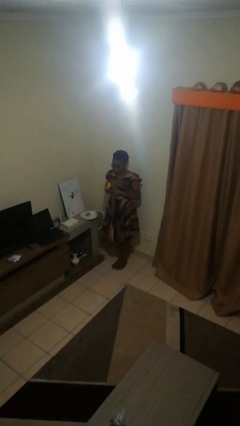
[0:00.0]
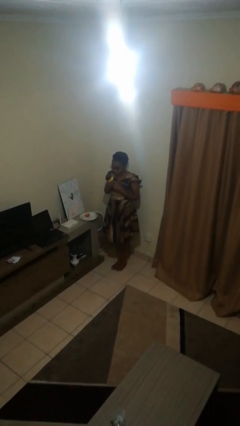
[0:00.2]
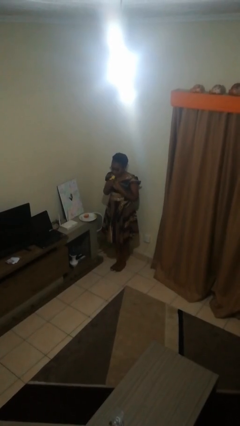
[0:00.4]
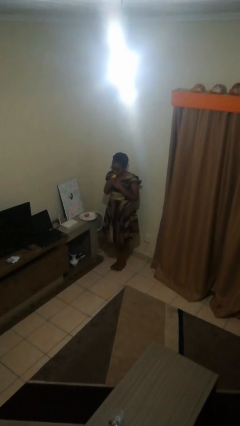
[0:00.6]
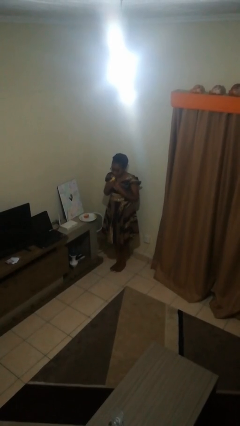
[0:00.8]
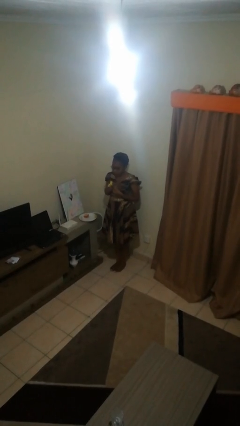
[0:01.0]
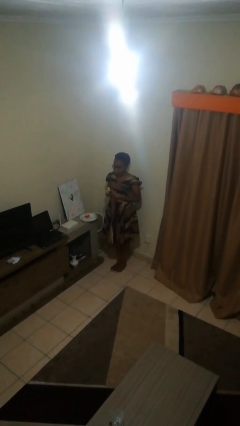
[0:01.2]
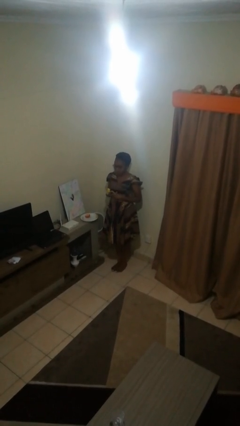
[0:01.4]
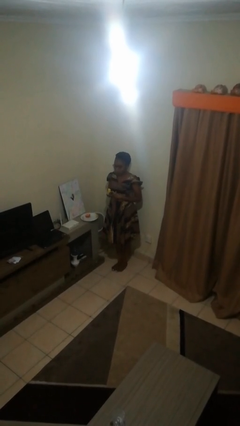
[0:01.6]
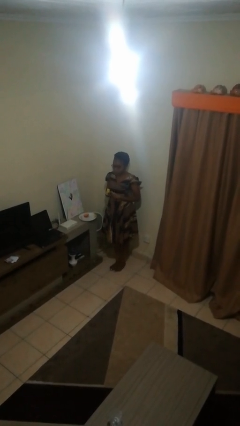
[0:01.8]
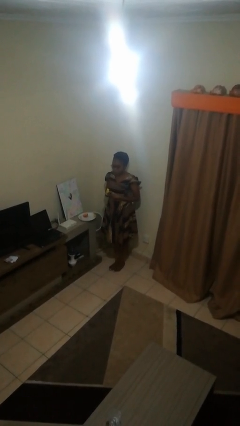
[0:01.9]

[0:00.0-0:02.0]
person eats banana

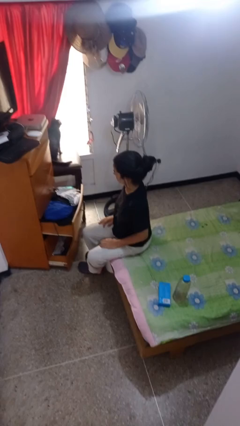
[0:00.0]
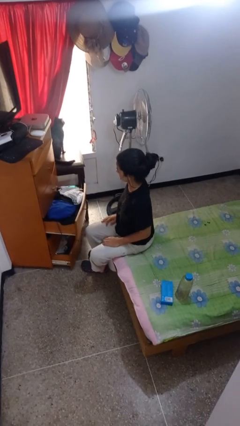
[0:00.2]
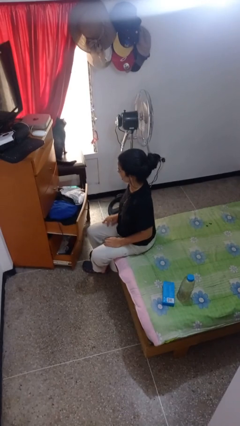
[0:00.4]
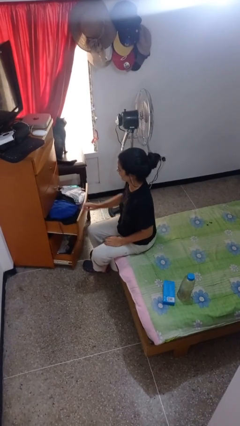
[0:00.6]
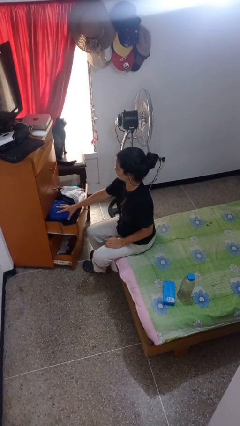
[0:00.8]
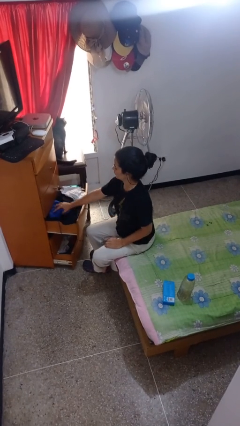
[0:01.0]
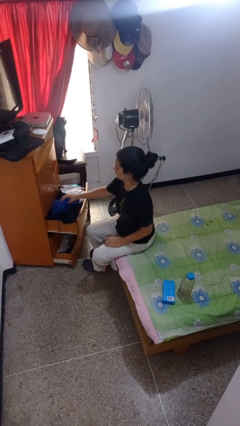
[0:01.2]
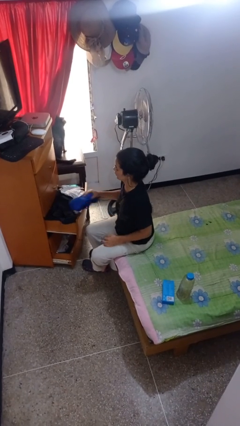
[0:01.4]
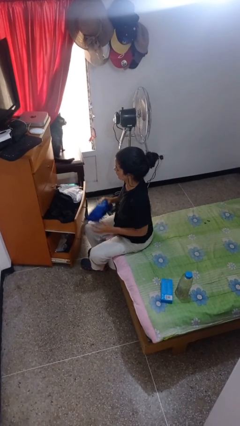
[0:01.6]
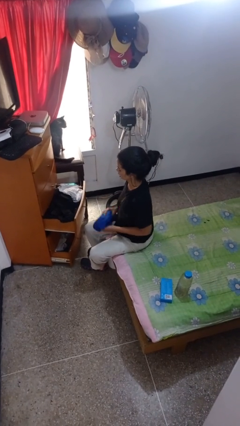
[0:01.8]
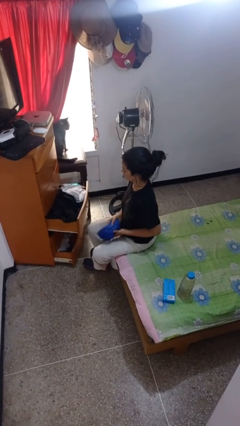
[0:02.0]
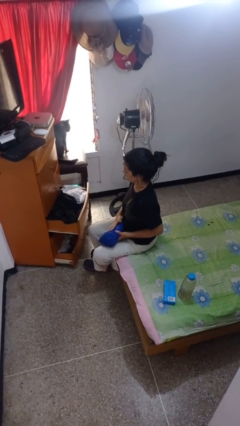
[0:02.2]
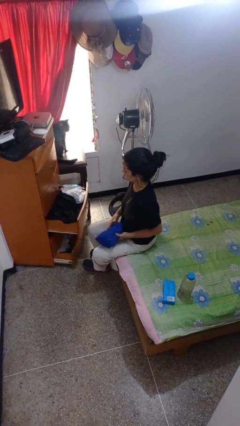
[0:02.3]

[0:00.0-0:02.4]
person takes clothes from dresser

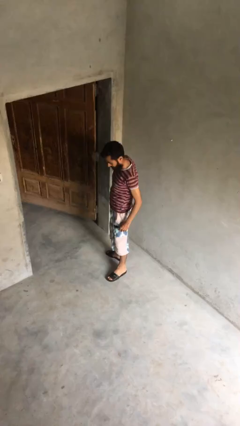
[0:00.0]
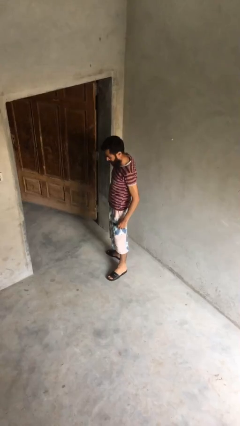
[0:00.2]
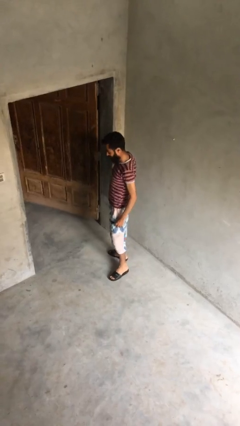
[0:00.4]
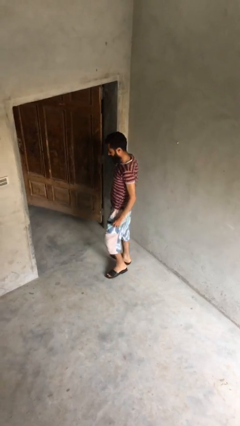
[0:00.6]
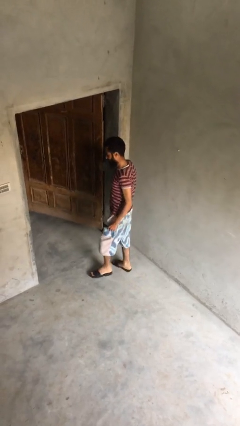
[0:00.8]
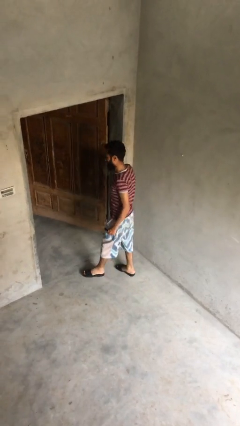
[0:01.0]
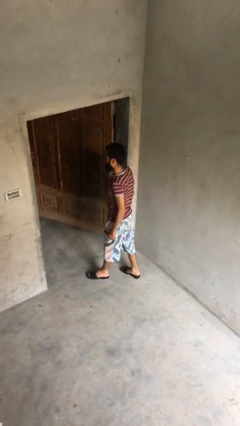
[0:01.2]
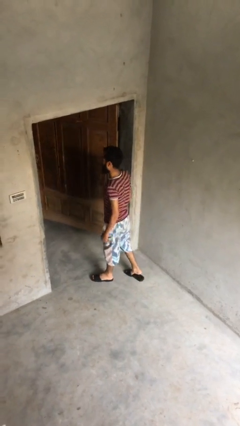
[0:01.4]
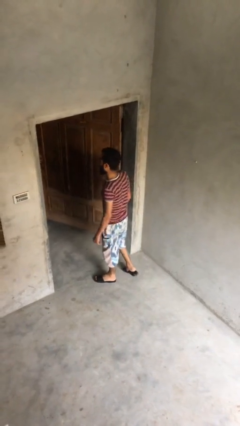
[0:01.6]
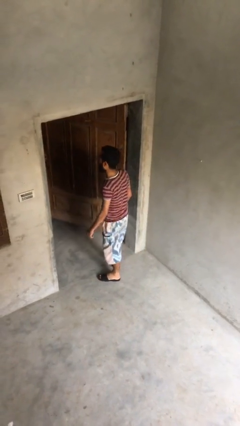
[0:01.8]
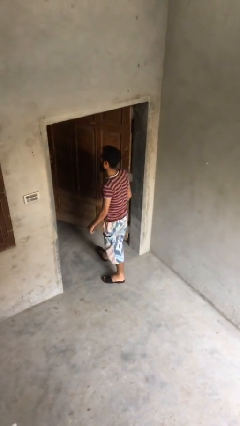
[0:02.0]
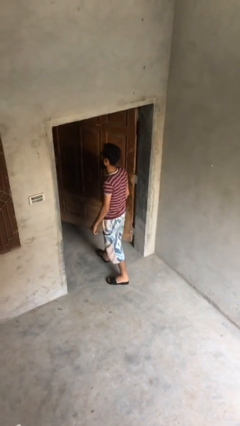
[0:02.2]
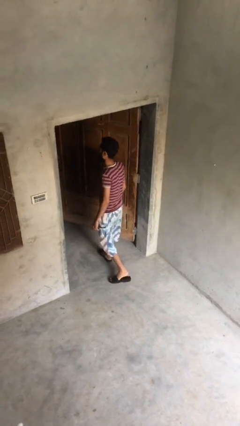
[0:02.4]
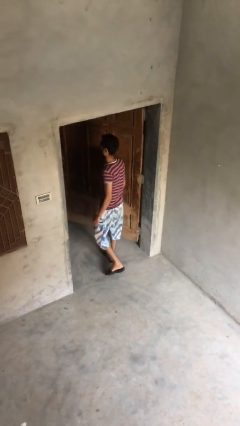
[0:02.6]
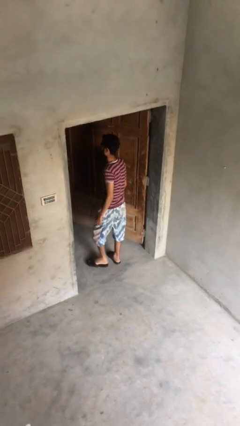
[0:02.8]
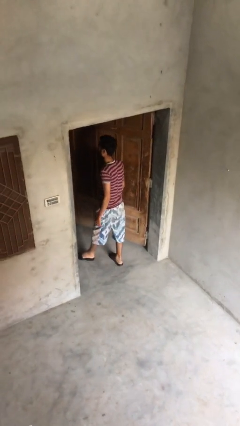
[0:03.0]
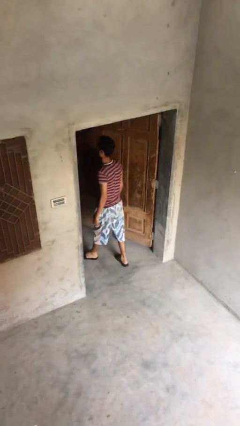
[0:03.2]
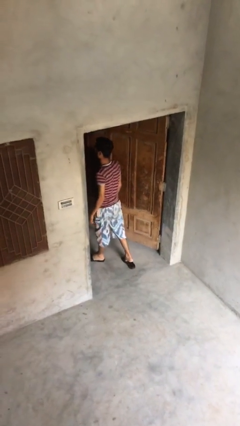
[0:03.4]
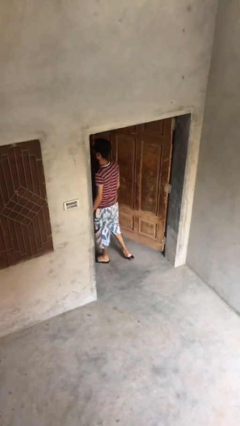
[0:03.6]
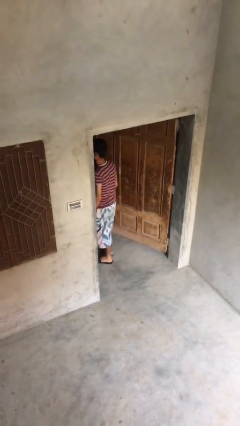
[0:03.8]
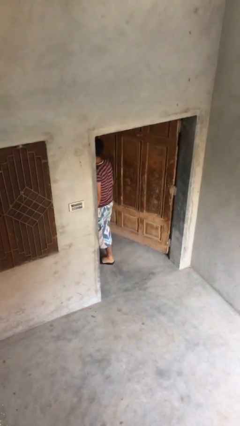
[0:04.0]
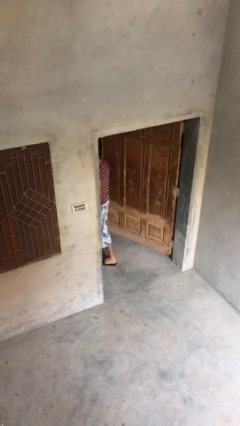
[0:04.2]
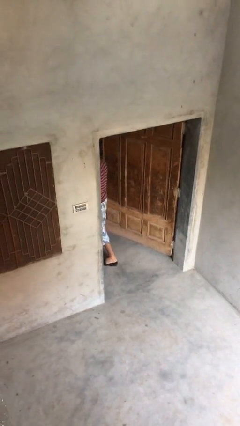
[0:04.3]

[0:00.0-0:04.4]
person exits scene through structure

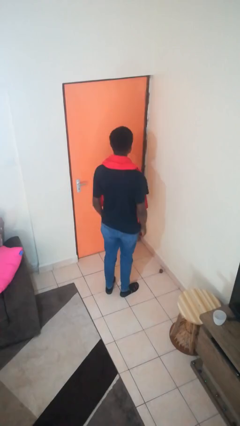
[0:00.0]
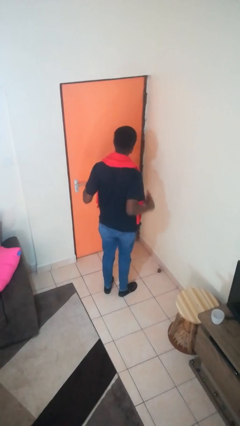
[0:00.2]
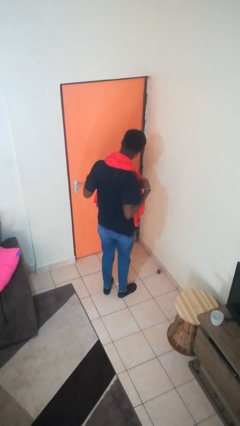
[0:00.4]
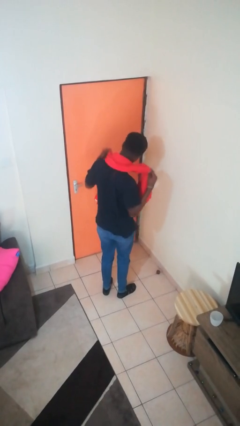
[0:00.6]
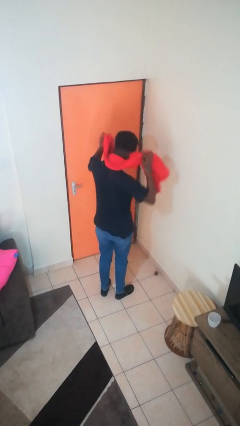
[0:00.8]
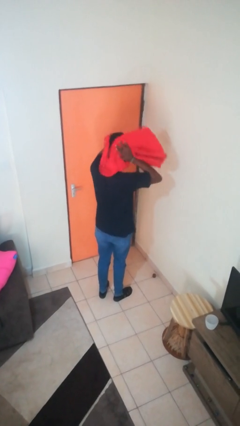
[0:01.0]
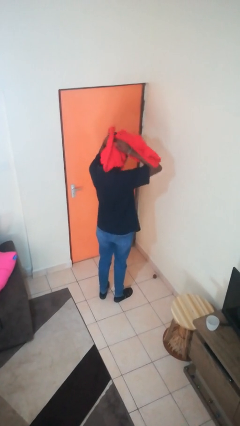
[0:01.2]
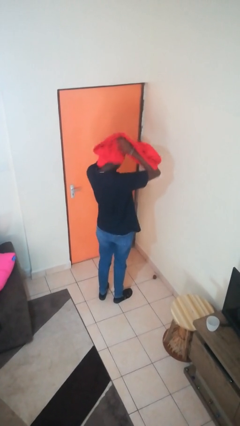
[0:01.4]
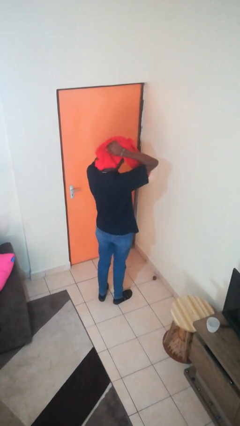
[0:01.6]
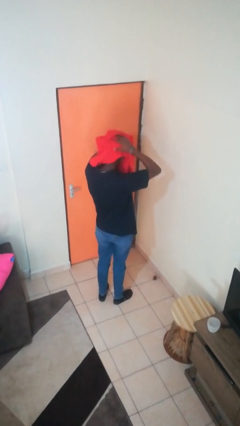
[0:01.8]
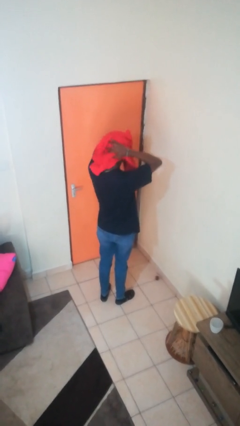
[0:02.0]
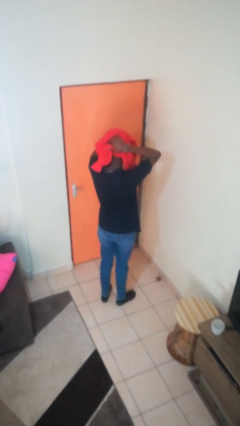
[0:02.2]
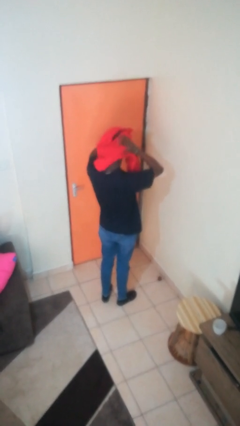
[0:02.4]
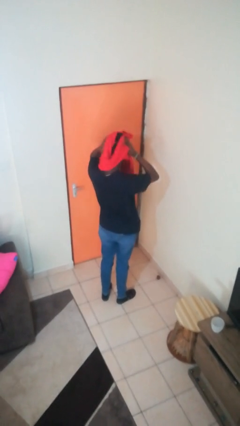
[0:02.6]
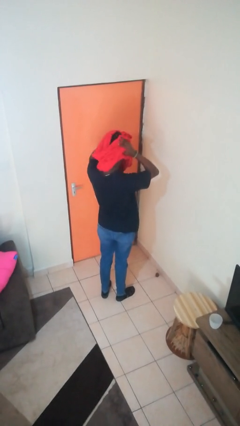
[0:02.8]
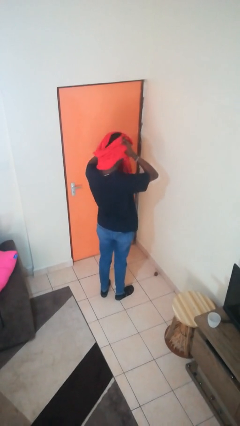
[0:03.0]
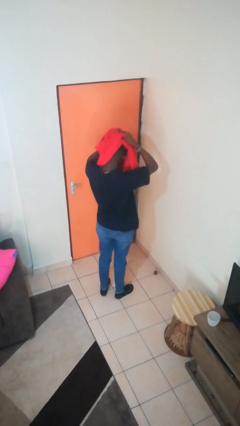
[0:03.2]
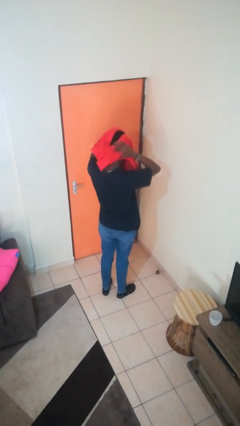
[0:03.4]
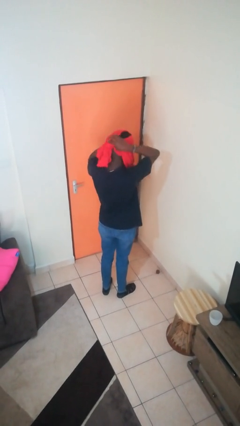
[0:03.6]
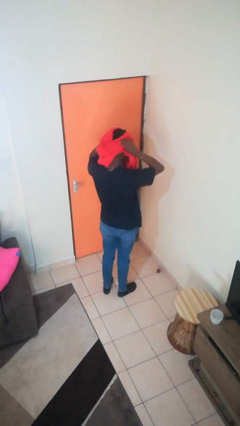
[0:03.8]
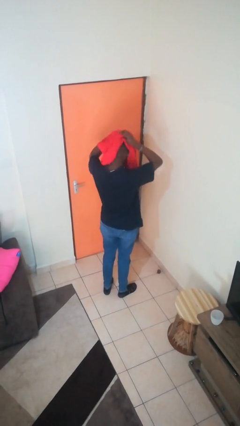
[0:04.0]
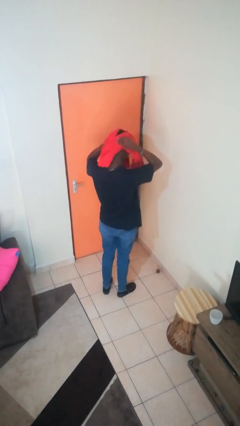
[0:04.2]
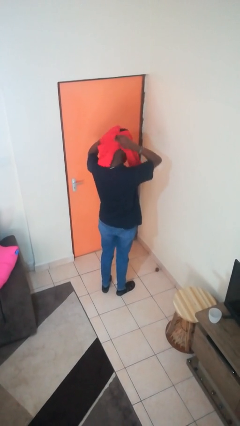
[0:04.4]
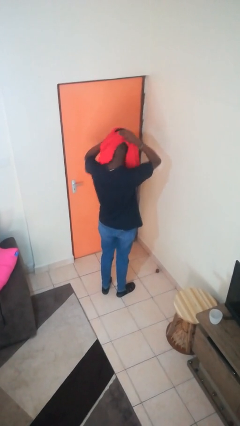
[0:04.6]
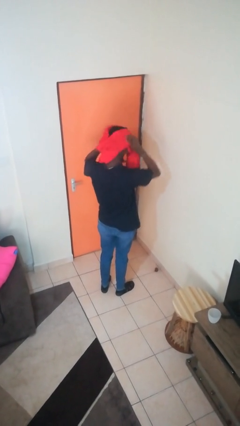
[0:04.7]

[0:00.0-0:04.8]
person dries hair with towel

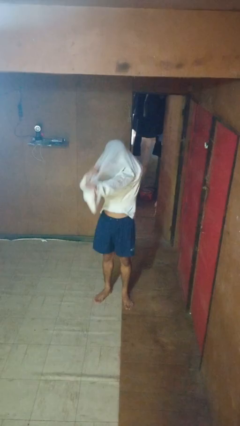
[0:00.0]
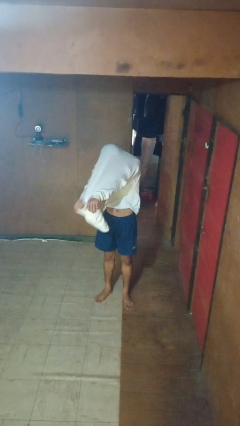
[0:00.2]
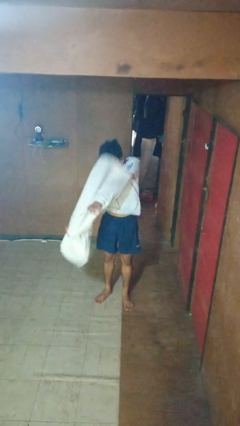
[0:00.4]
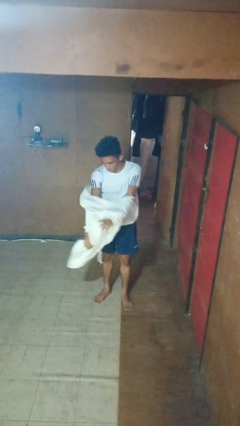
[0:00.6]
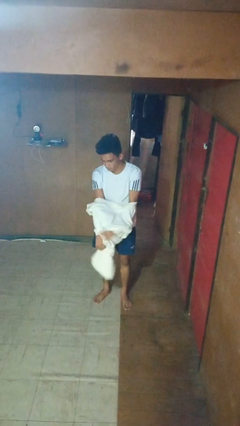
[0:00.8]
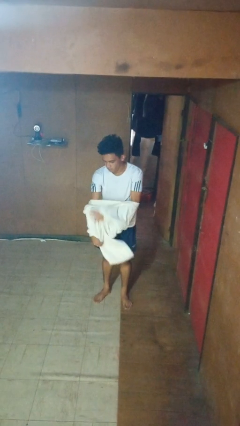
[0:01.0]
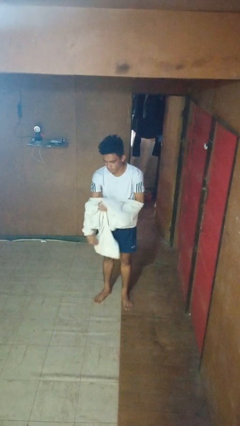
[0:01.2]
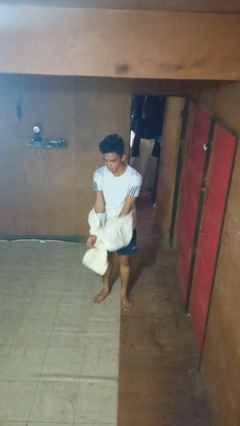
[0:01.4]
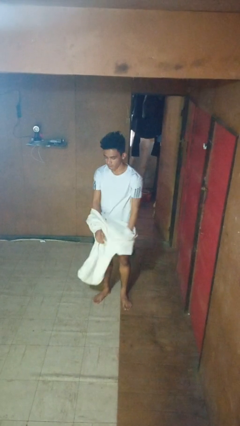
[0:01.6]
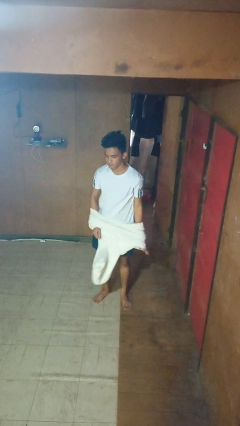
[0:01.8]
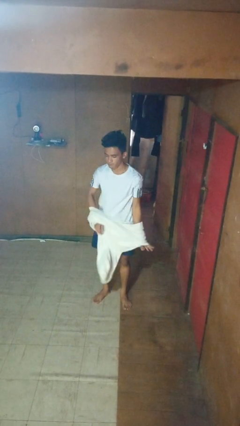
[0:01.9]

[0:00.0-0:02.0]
person takes off hoodie

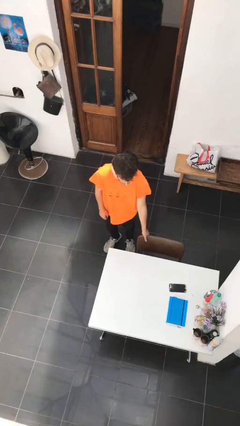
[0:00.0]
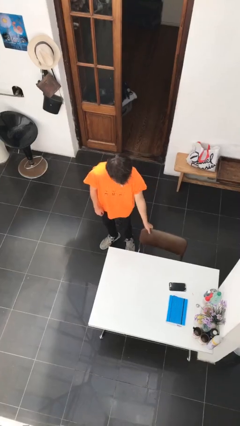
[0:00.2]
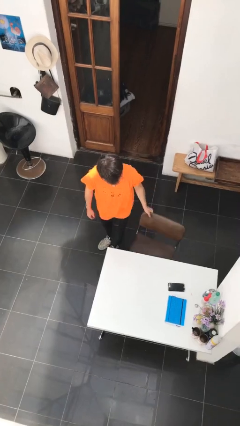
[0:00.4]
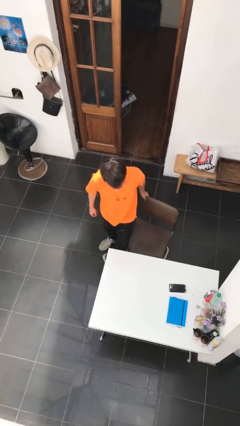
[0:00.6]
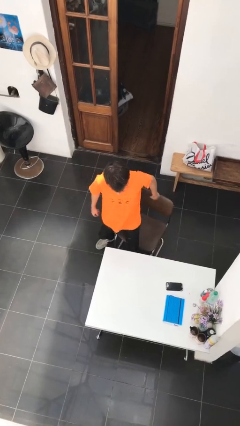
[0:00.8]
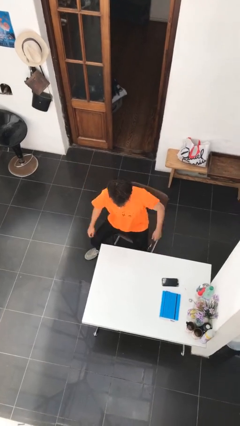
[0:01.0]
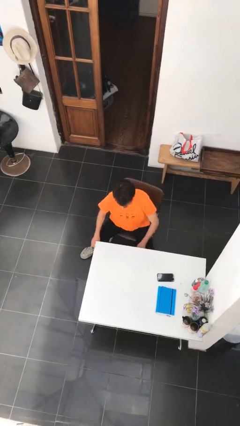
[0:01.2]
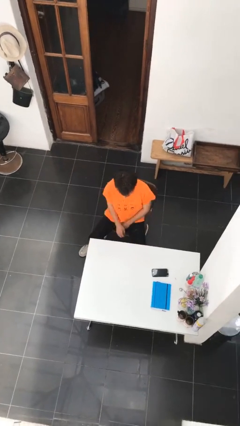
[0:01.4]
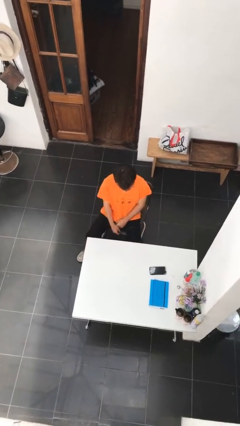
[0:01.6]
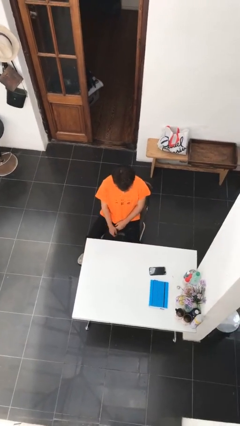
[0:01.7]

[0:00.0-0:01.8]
person sits down

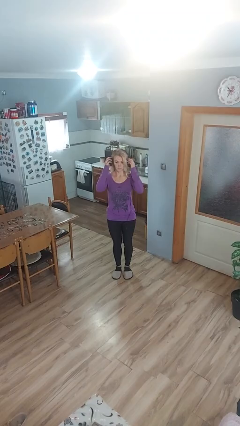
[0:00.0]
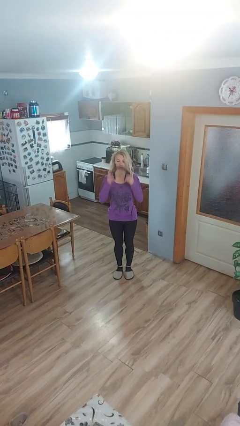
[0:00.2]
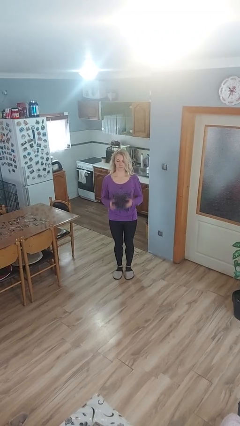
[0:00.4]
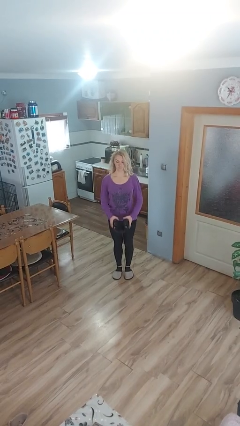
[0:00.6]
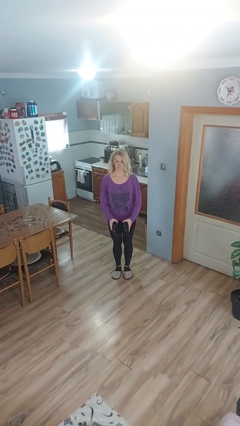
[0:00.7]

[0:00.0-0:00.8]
person takes off headphones
